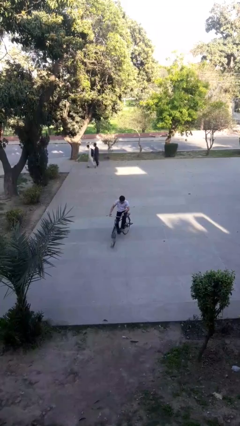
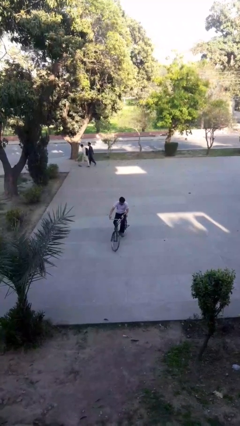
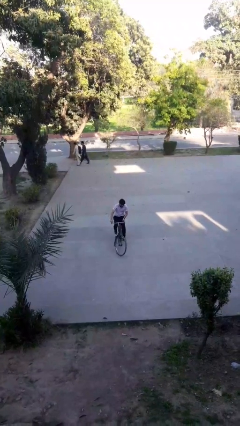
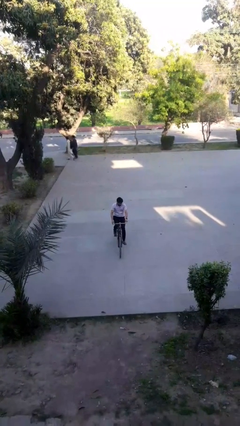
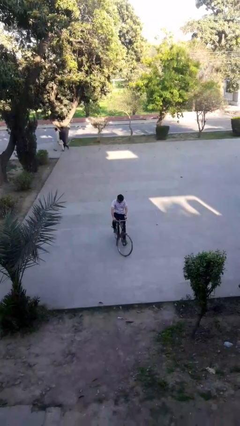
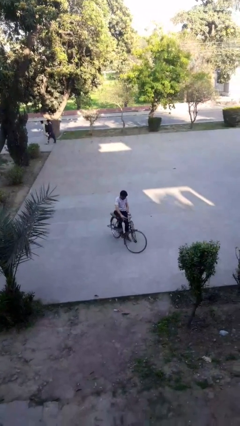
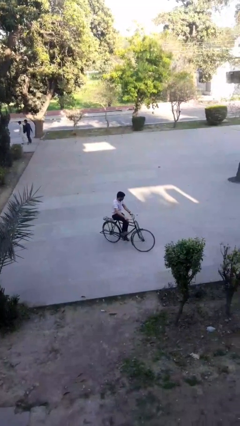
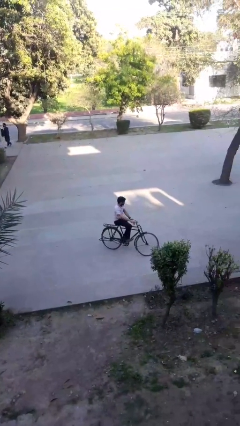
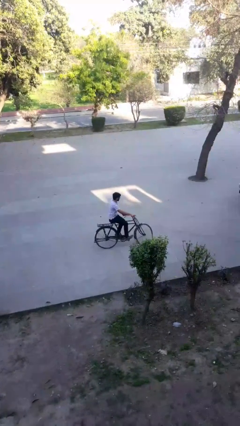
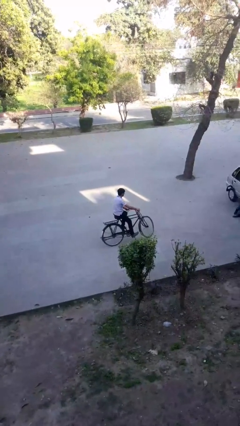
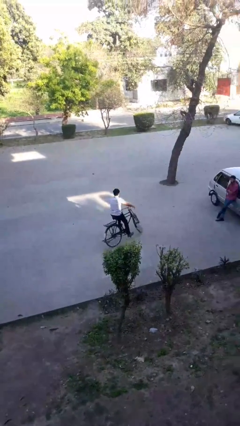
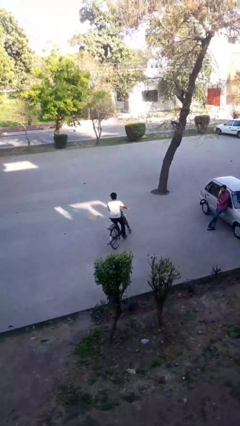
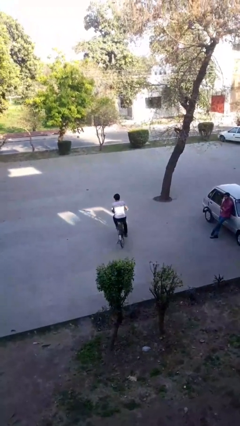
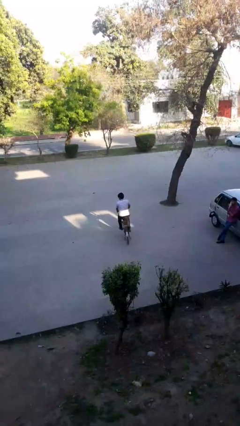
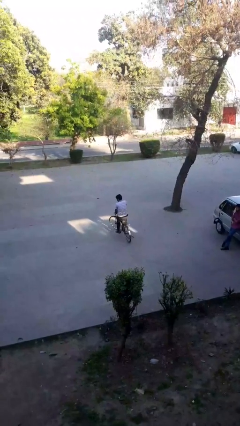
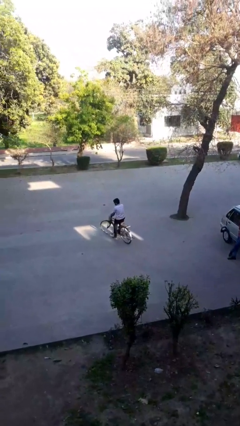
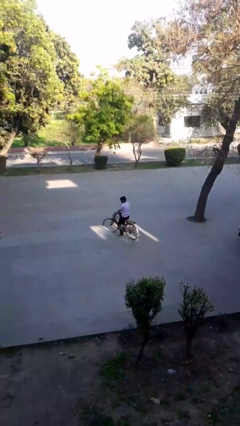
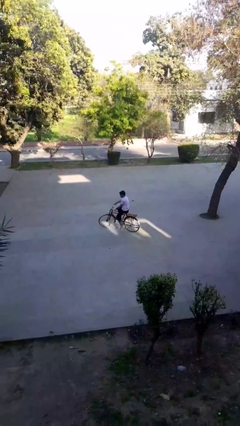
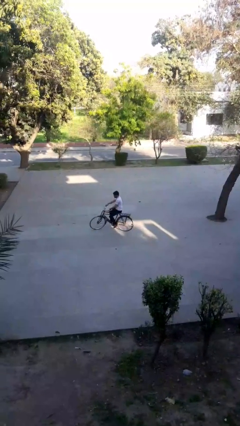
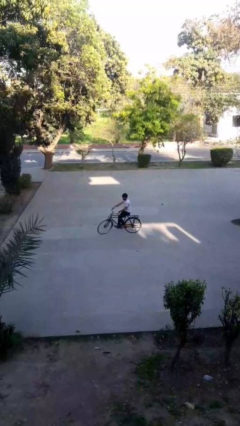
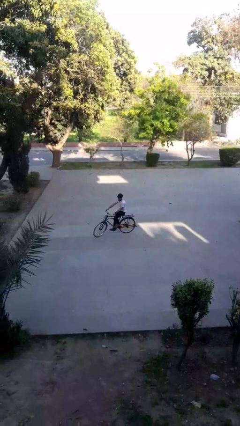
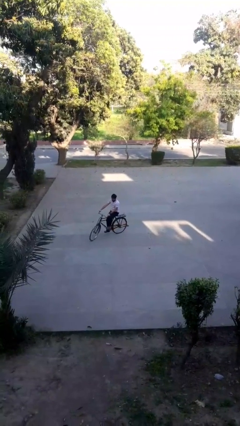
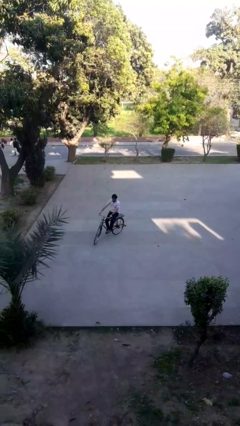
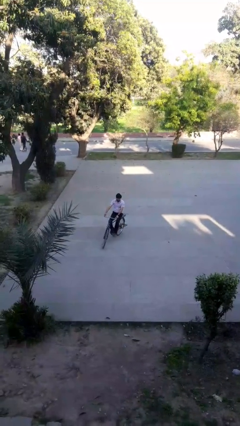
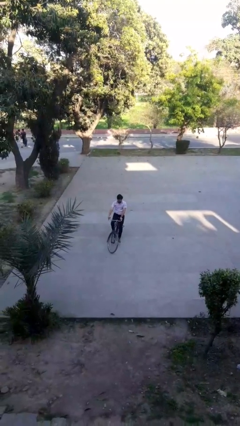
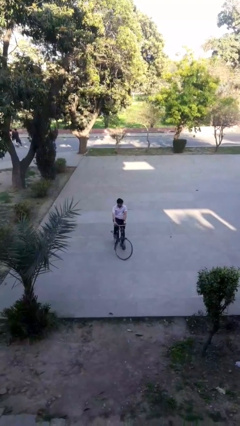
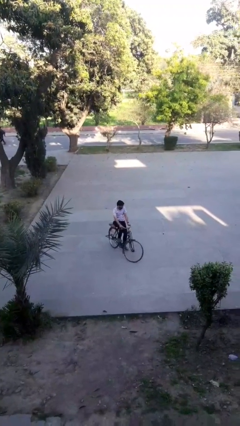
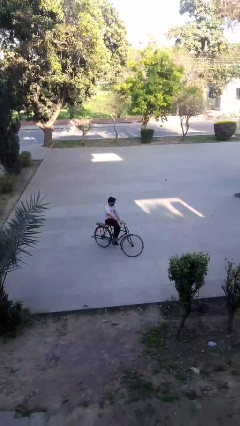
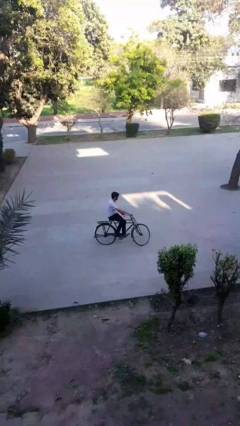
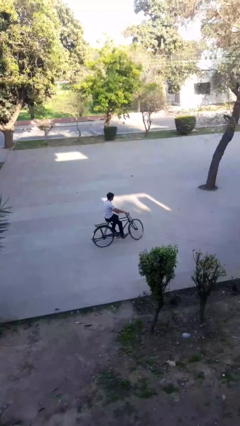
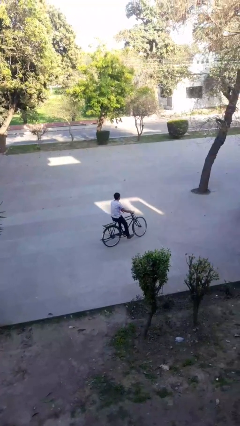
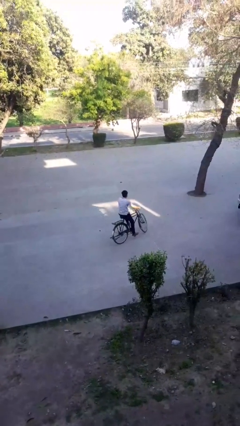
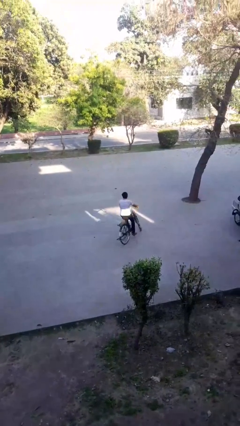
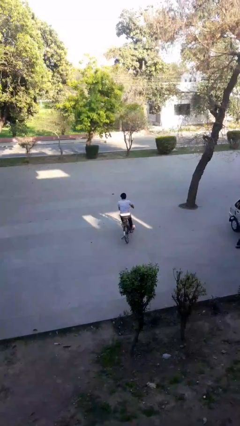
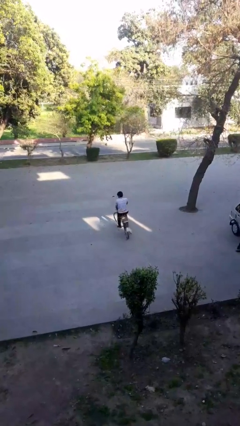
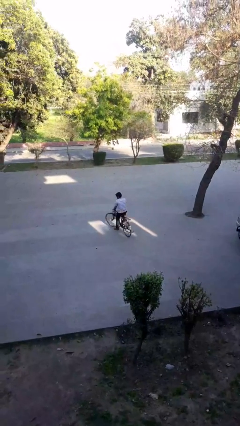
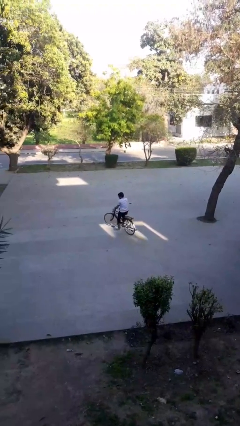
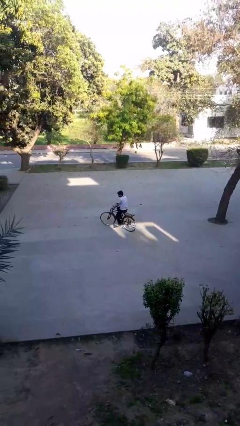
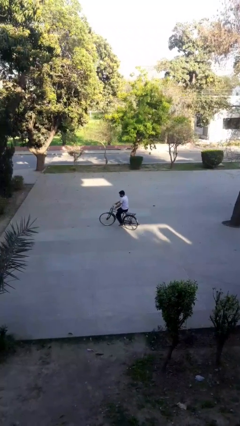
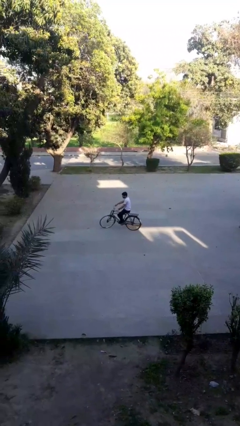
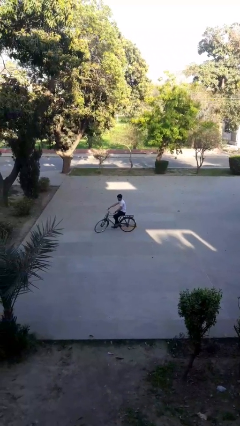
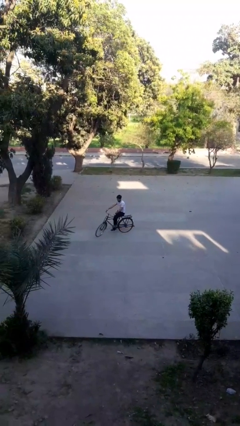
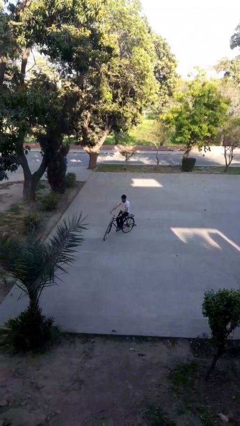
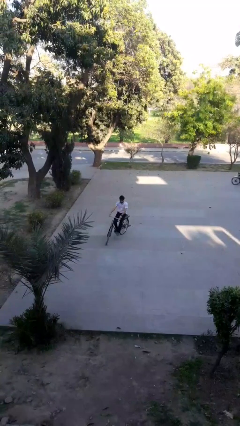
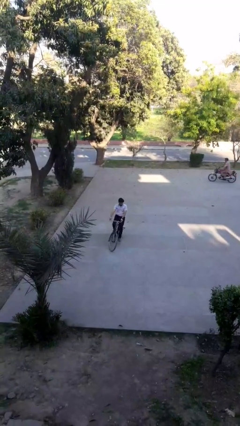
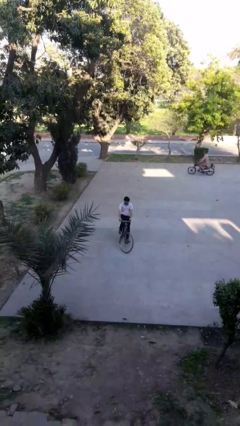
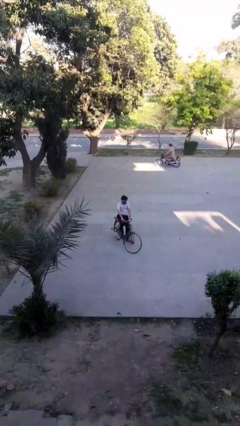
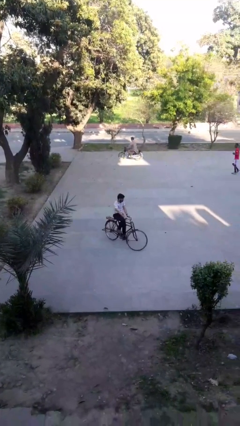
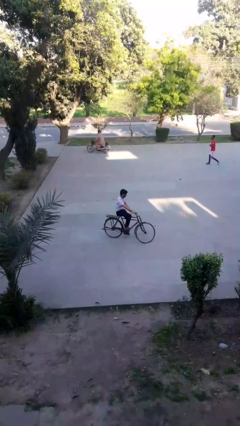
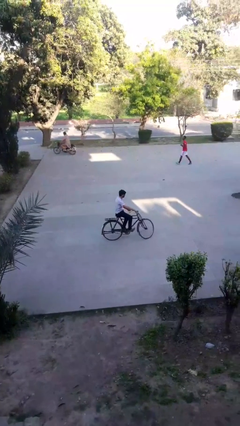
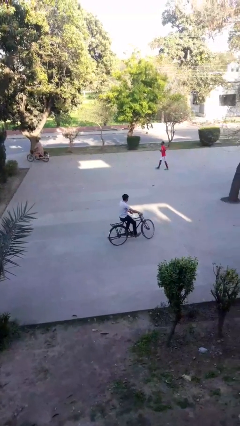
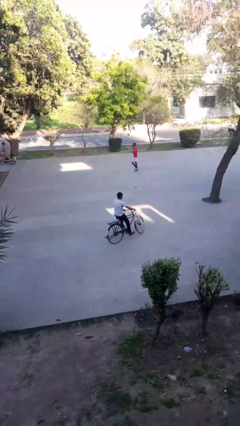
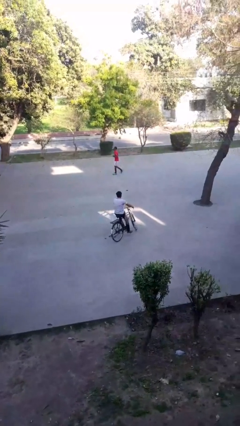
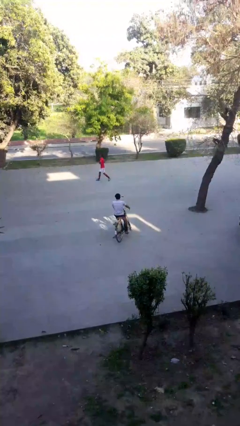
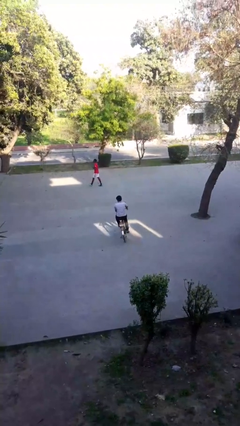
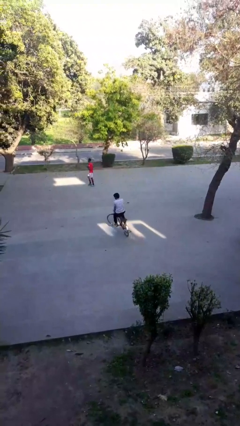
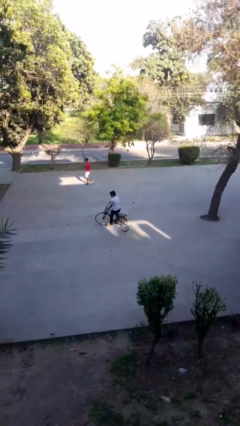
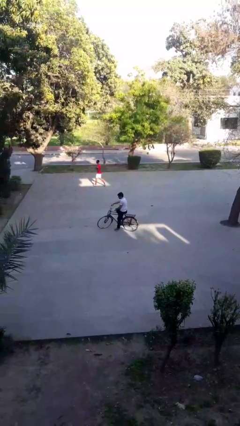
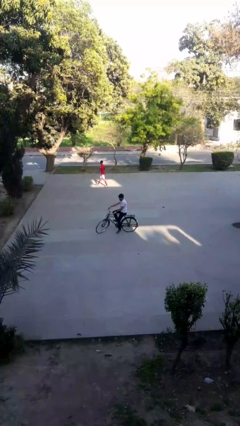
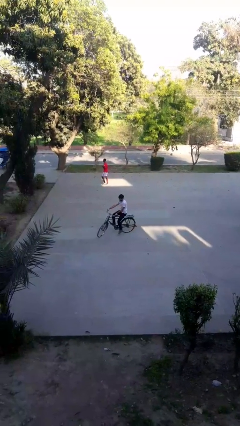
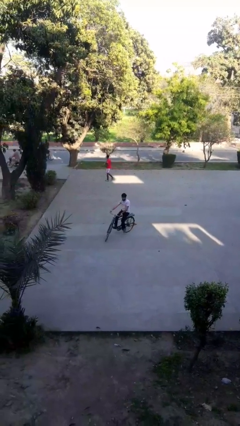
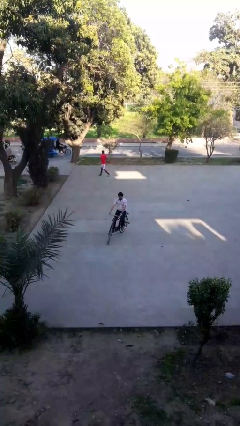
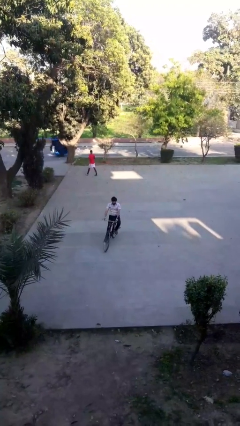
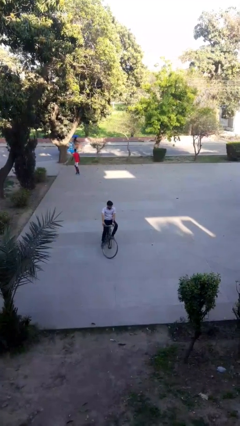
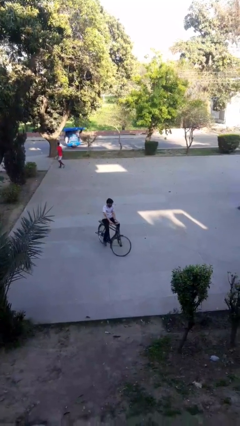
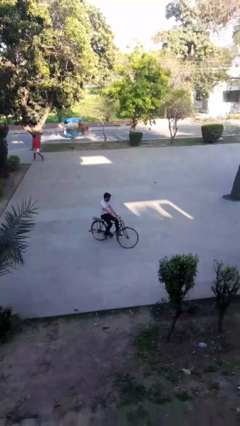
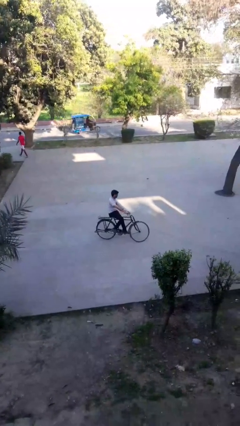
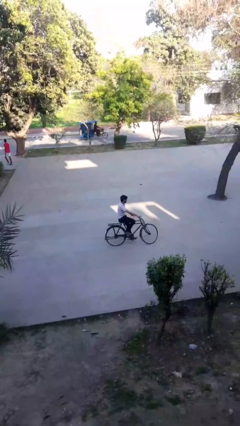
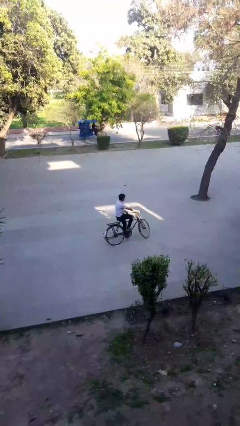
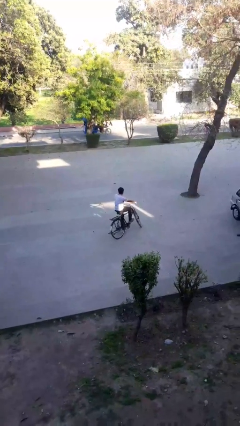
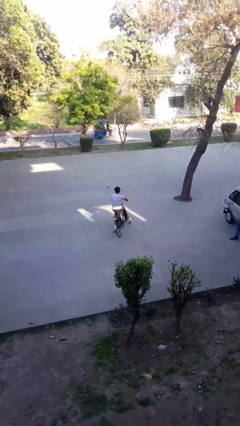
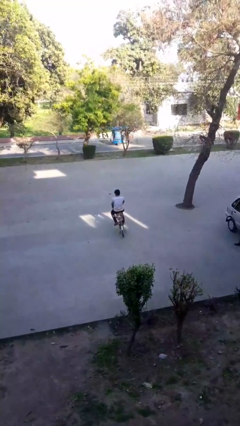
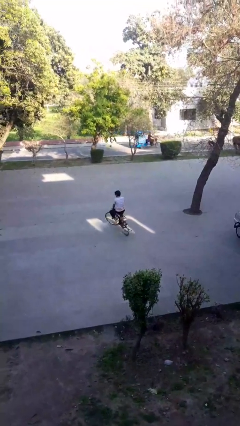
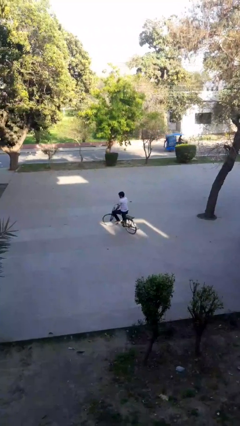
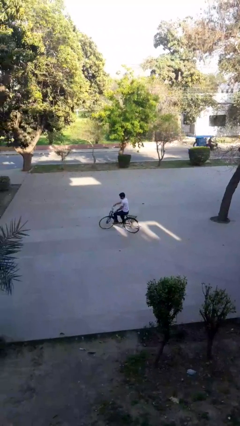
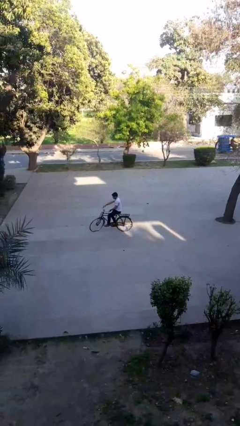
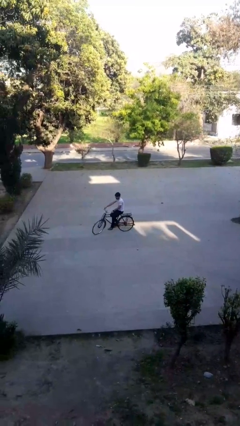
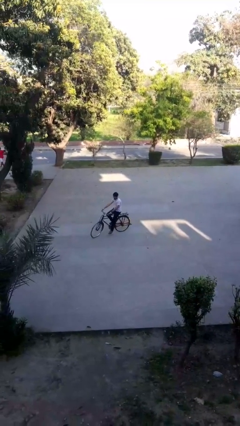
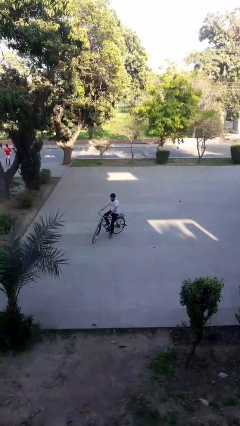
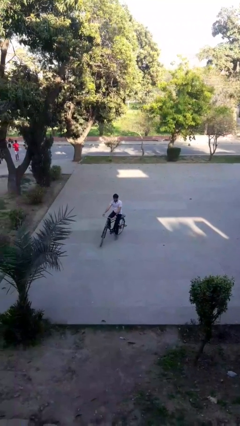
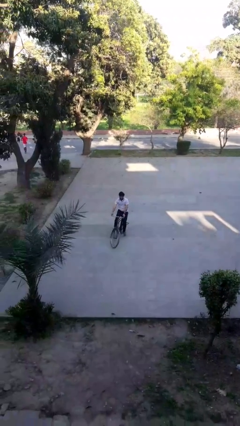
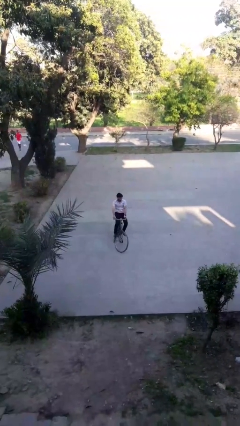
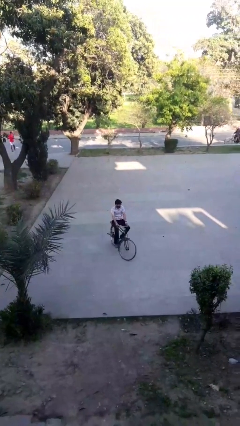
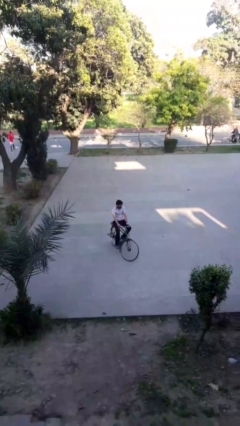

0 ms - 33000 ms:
person rides bicycle

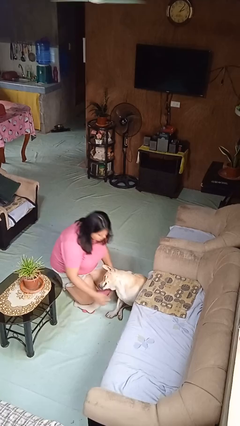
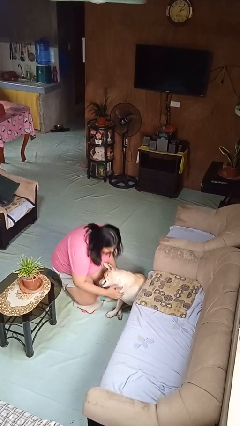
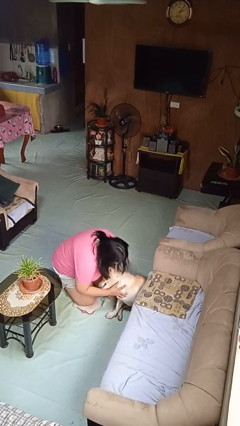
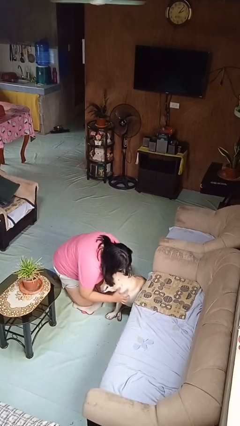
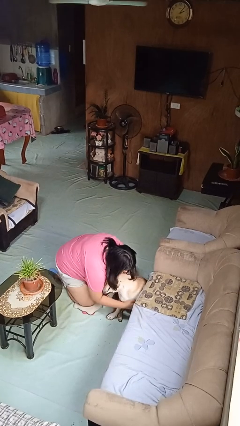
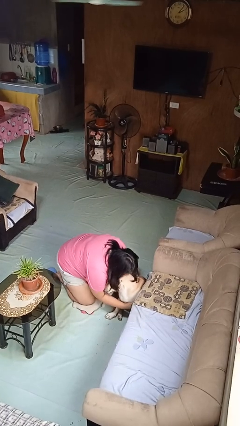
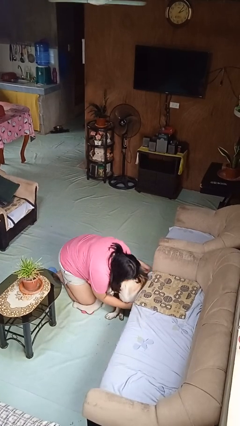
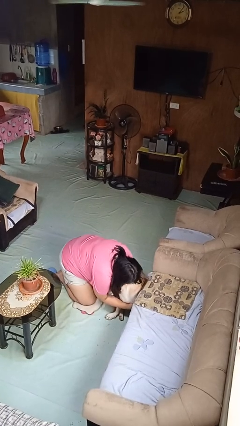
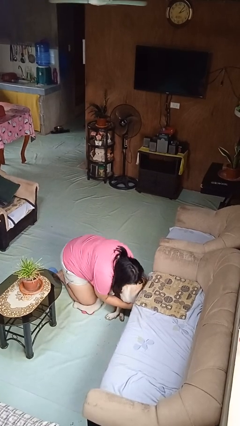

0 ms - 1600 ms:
person hugs dog
